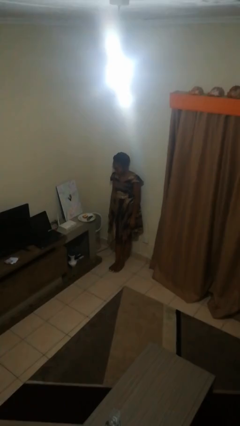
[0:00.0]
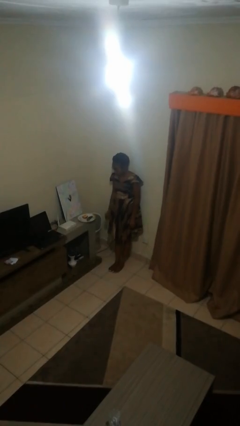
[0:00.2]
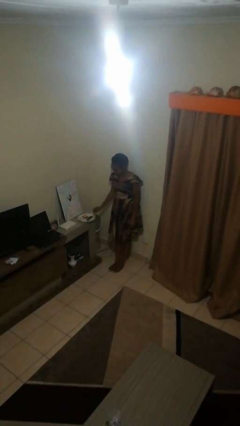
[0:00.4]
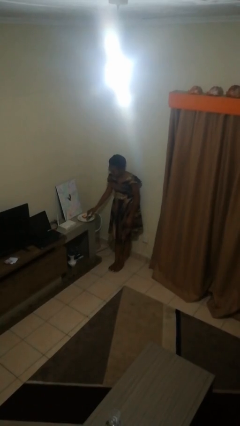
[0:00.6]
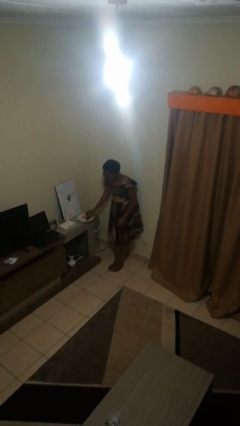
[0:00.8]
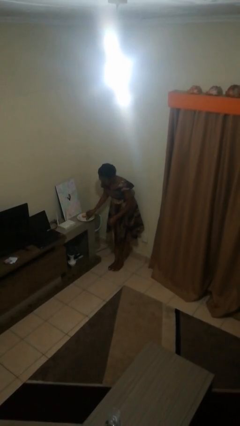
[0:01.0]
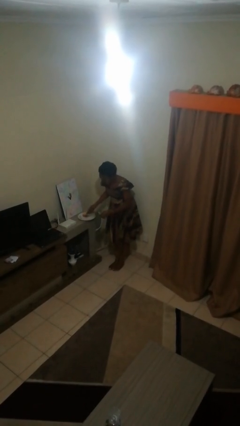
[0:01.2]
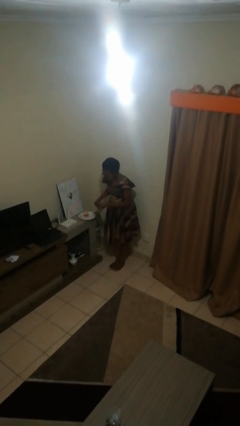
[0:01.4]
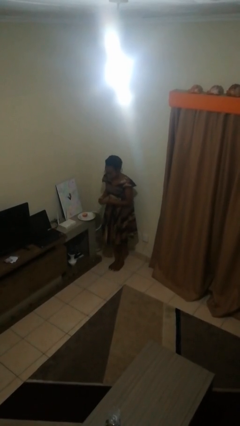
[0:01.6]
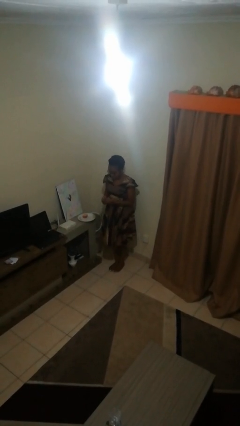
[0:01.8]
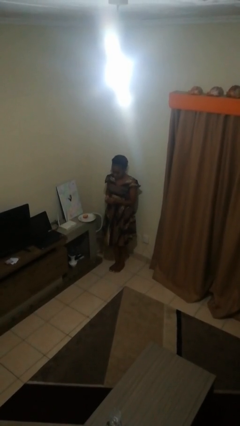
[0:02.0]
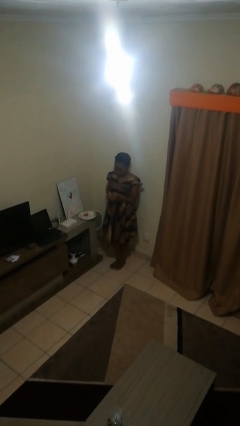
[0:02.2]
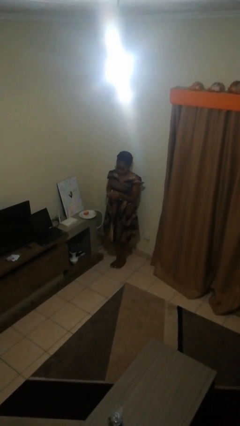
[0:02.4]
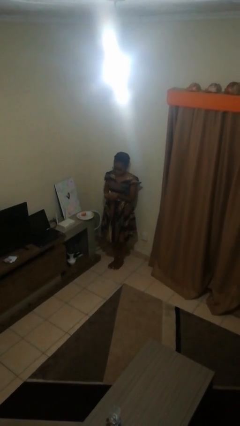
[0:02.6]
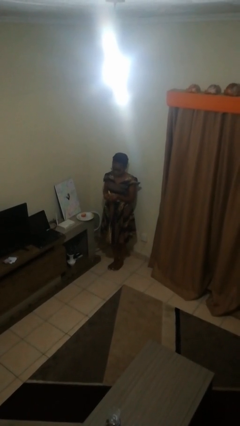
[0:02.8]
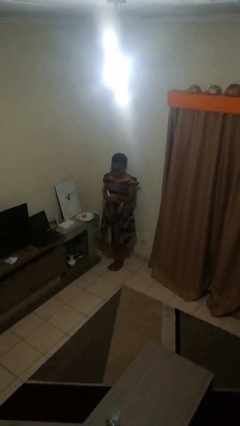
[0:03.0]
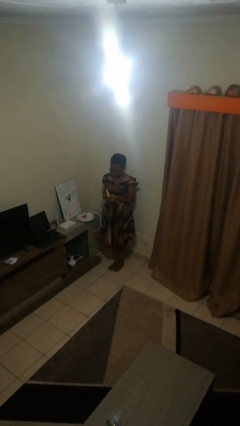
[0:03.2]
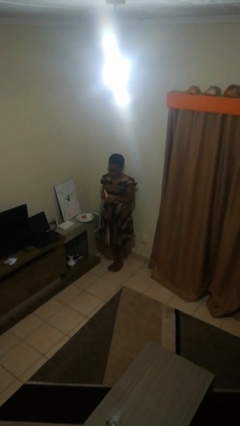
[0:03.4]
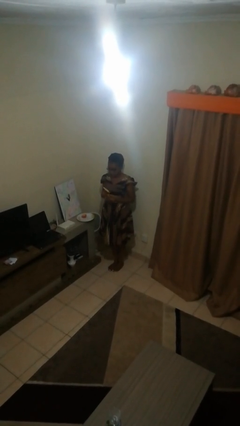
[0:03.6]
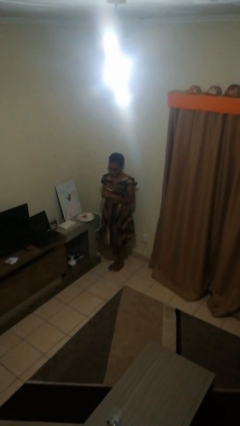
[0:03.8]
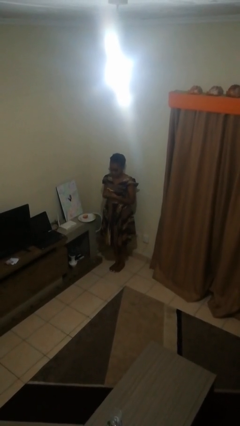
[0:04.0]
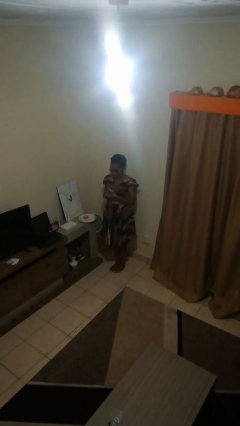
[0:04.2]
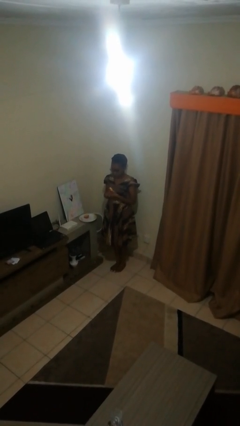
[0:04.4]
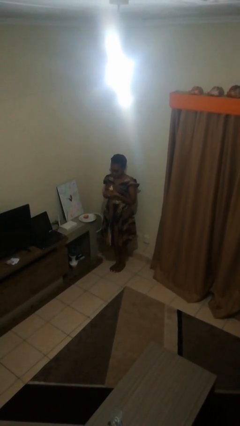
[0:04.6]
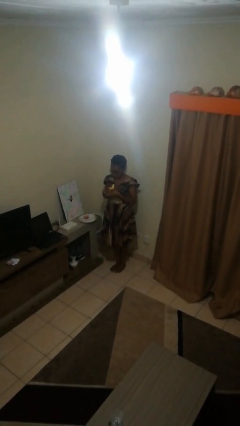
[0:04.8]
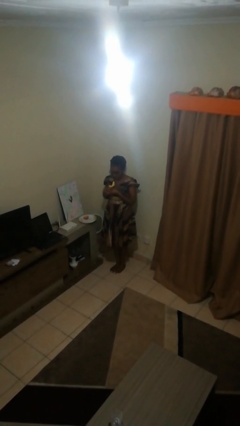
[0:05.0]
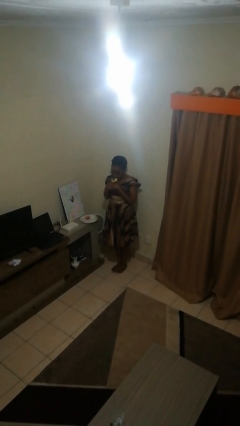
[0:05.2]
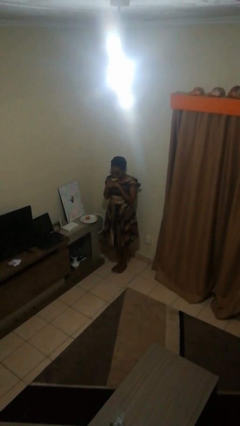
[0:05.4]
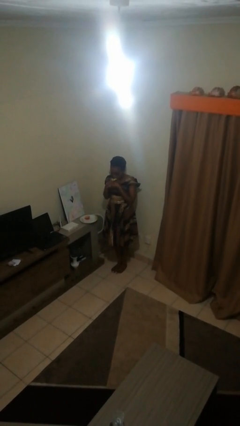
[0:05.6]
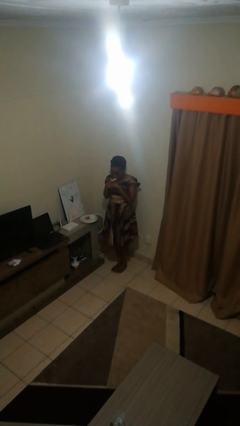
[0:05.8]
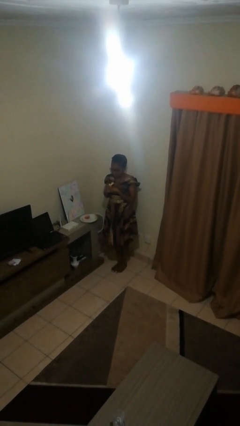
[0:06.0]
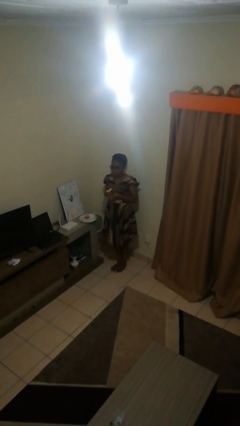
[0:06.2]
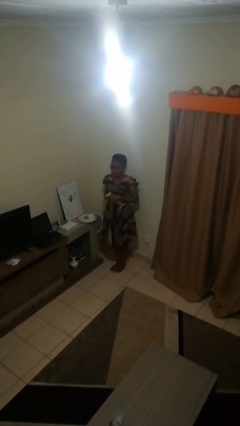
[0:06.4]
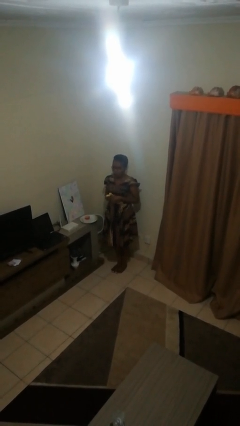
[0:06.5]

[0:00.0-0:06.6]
person eats banana

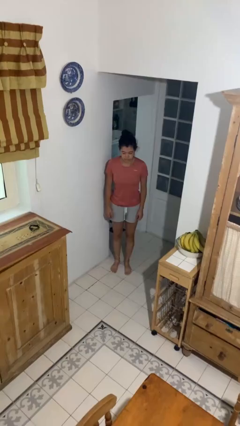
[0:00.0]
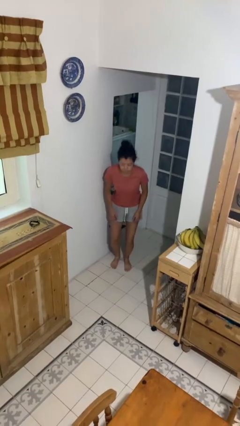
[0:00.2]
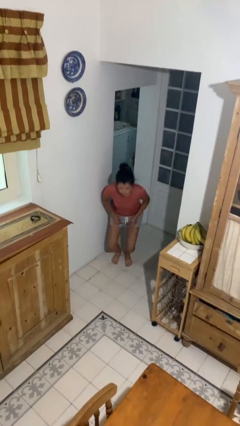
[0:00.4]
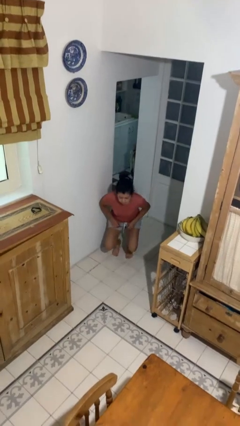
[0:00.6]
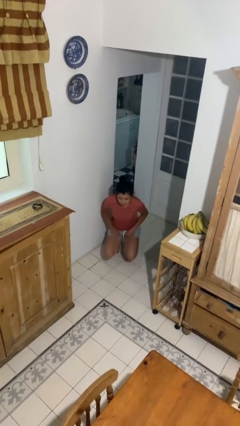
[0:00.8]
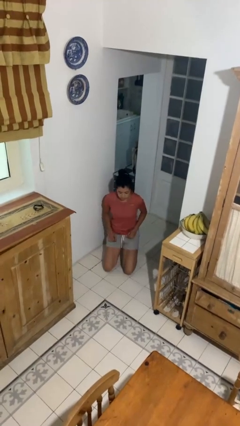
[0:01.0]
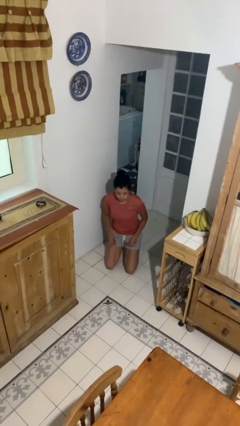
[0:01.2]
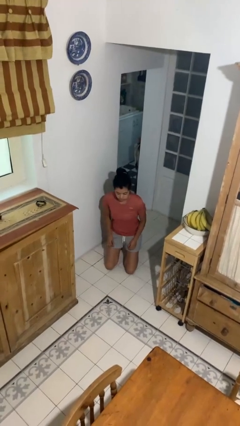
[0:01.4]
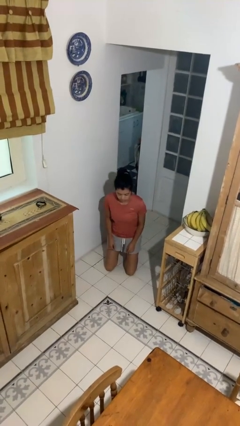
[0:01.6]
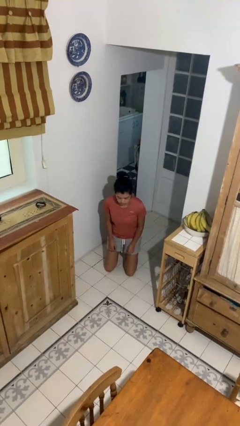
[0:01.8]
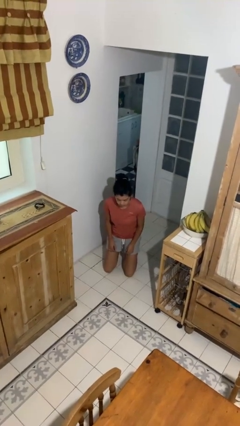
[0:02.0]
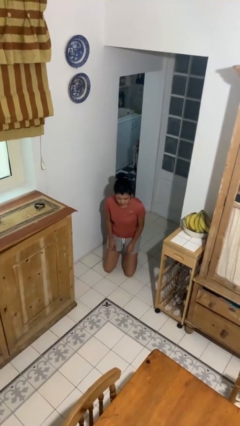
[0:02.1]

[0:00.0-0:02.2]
person kneels

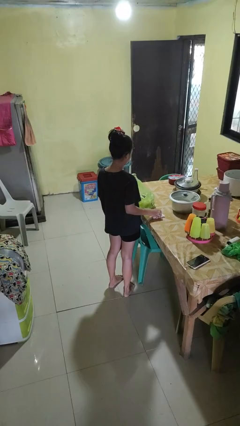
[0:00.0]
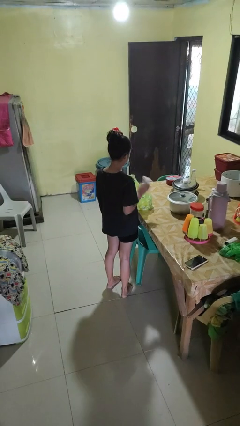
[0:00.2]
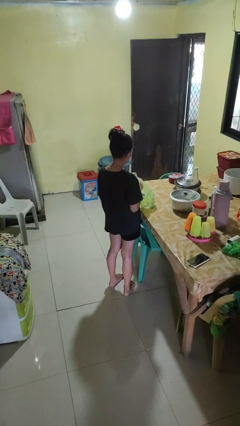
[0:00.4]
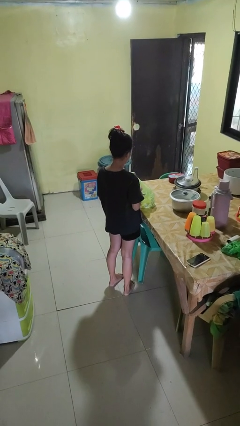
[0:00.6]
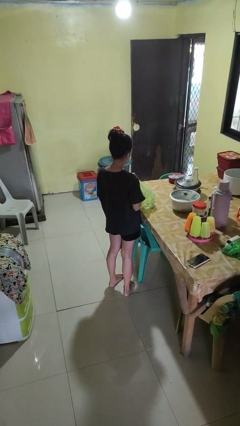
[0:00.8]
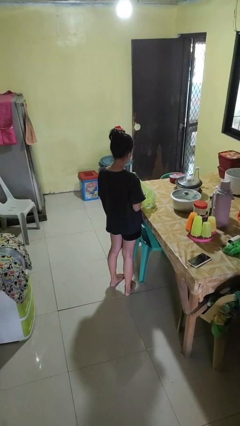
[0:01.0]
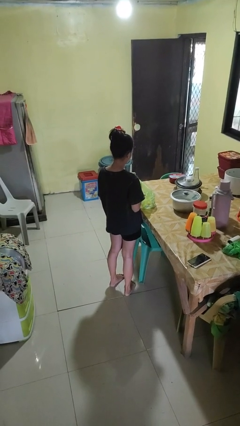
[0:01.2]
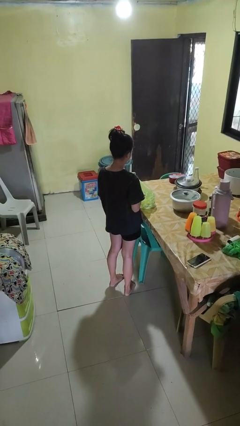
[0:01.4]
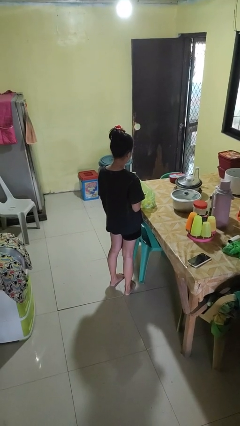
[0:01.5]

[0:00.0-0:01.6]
person puts object into bag

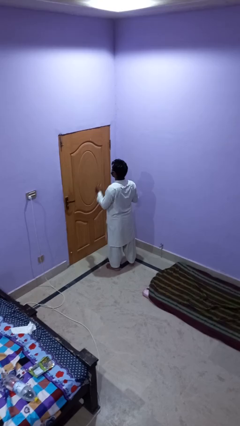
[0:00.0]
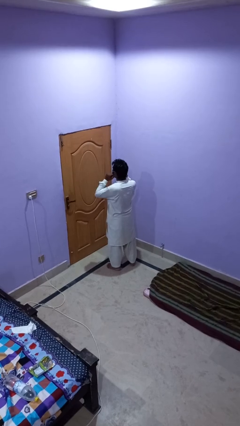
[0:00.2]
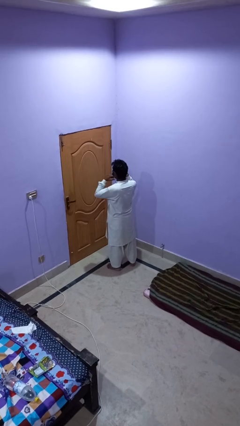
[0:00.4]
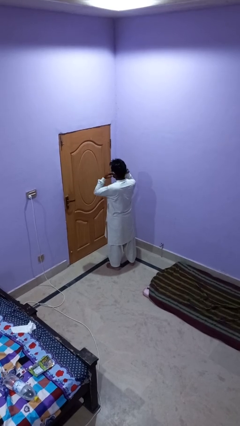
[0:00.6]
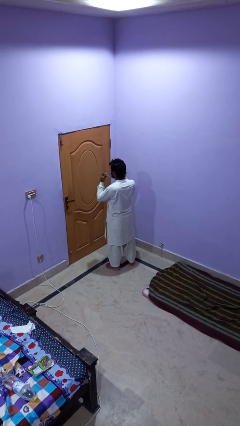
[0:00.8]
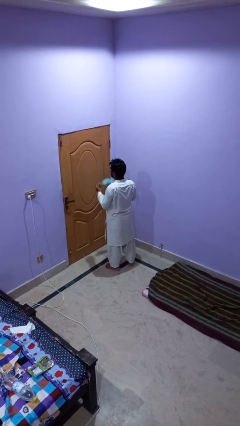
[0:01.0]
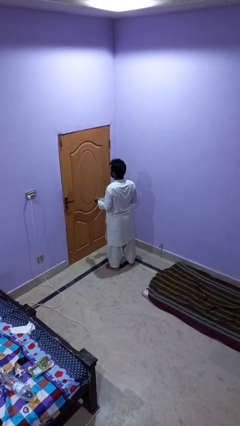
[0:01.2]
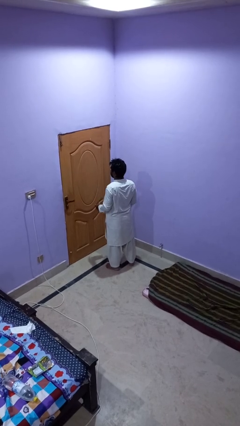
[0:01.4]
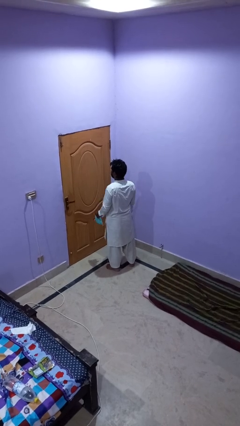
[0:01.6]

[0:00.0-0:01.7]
person takes off facemask

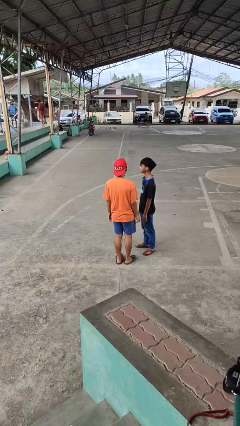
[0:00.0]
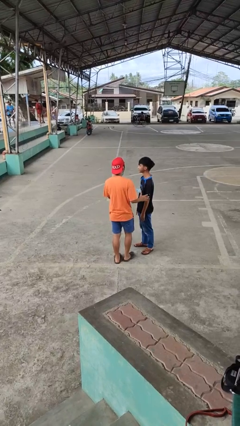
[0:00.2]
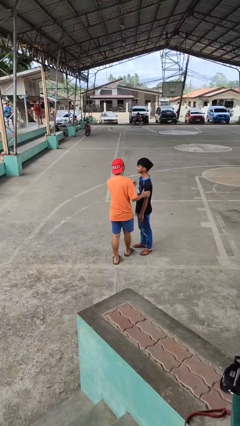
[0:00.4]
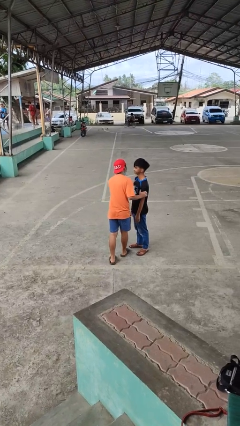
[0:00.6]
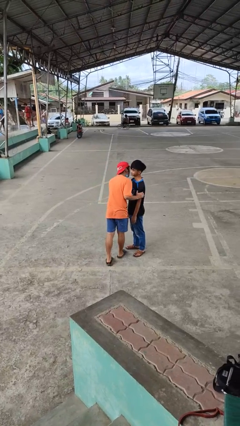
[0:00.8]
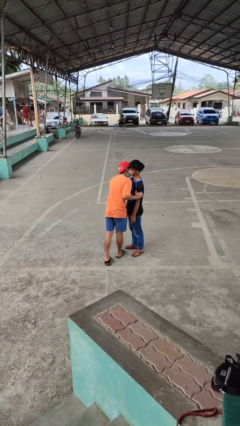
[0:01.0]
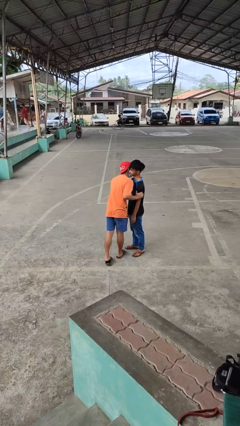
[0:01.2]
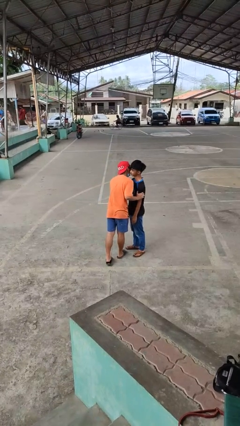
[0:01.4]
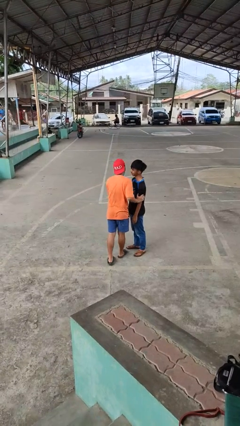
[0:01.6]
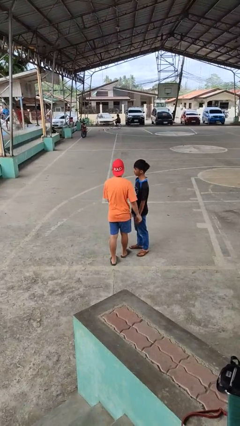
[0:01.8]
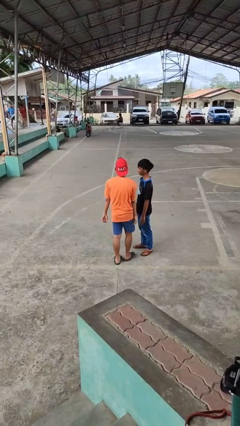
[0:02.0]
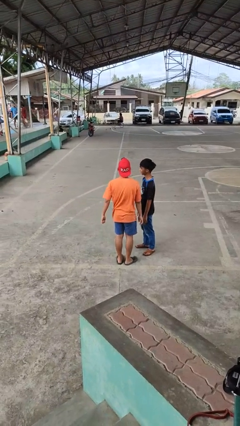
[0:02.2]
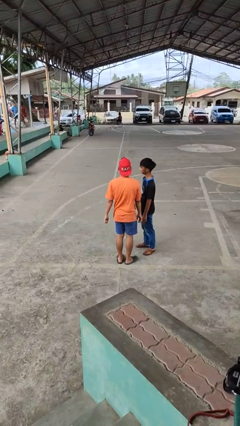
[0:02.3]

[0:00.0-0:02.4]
person kisses cheek of person

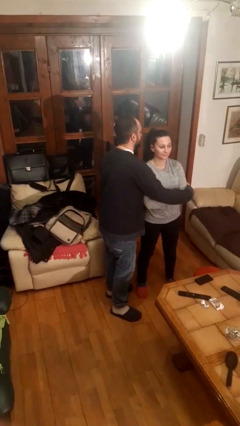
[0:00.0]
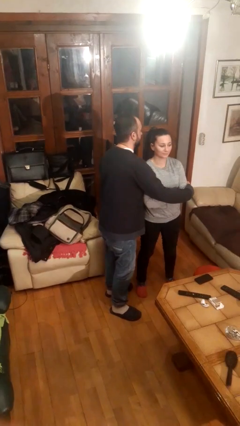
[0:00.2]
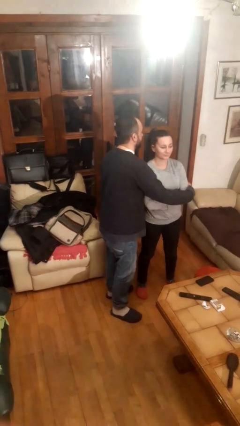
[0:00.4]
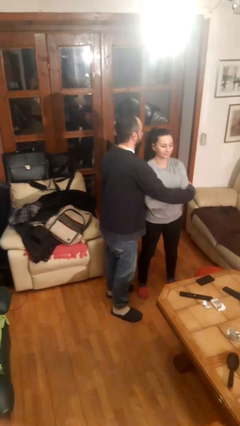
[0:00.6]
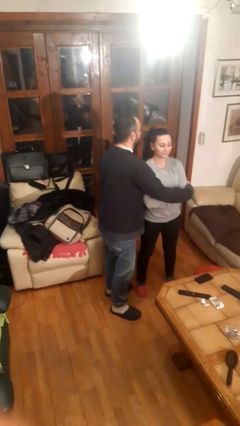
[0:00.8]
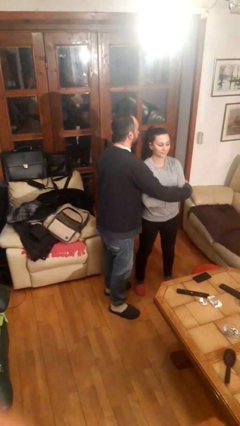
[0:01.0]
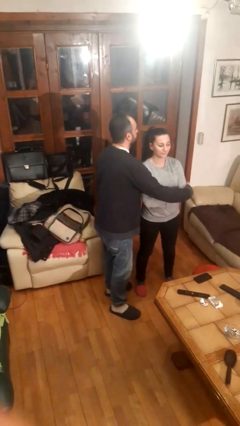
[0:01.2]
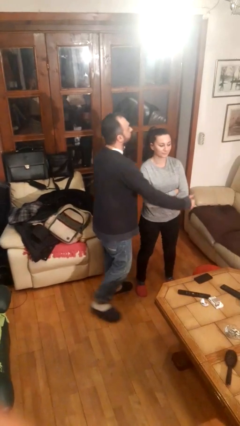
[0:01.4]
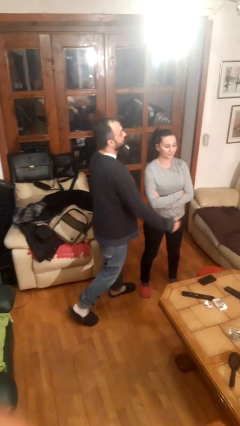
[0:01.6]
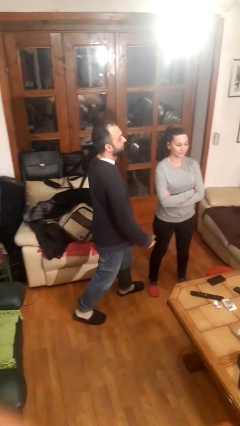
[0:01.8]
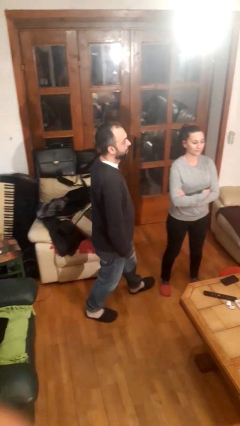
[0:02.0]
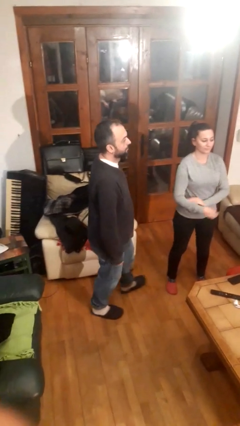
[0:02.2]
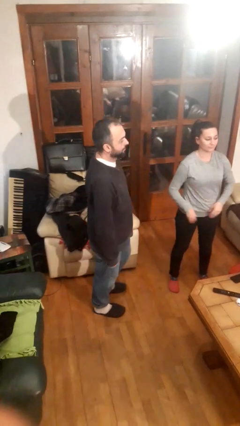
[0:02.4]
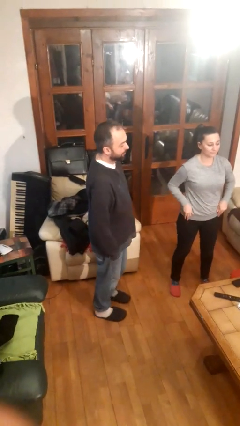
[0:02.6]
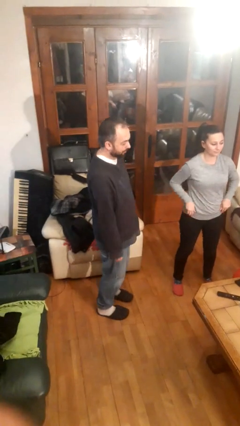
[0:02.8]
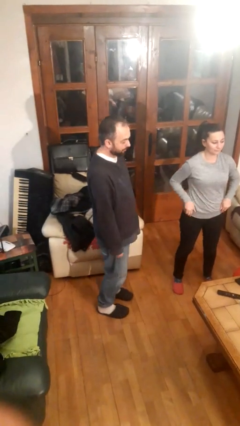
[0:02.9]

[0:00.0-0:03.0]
person hugs person from side
